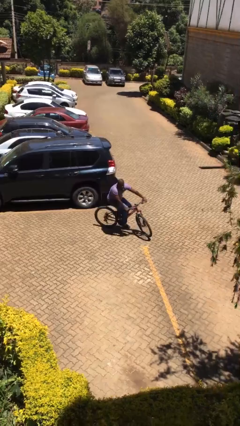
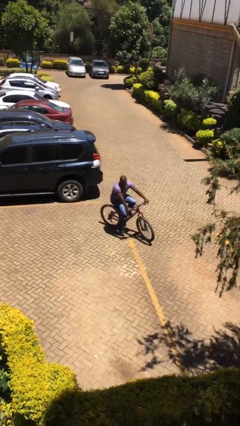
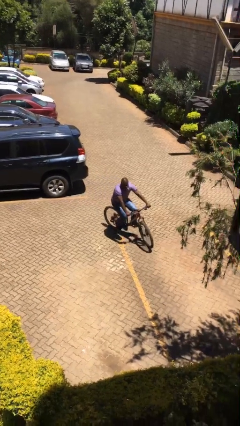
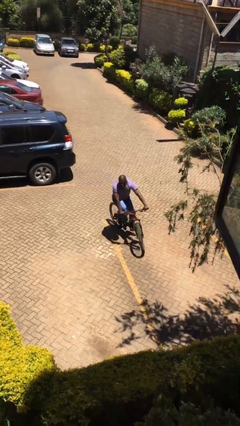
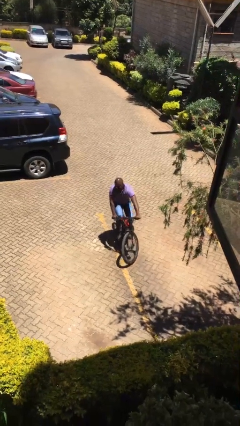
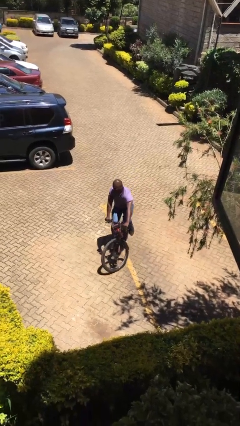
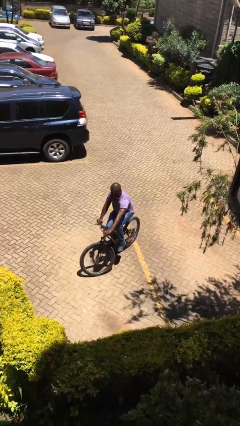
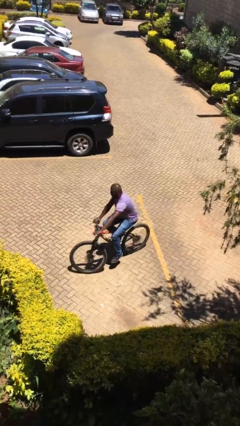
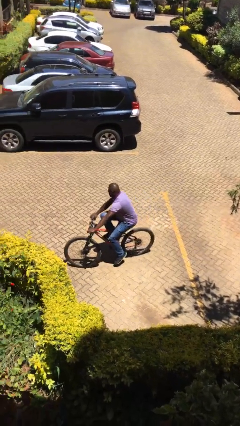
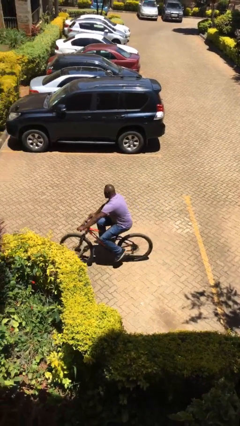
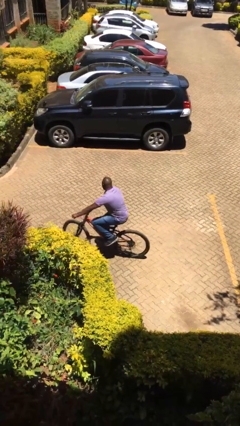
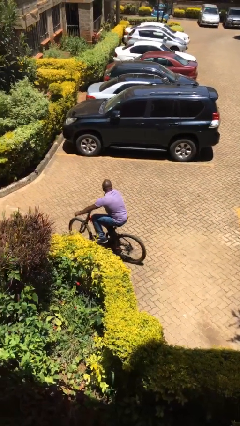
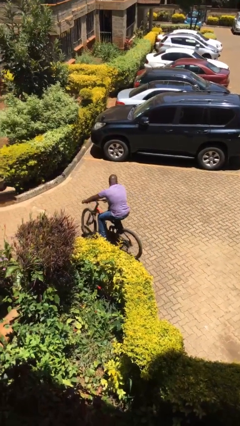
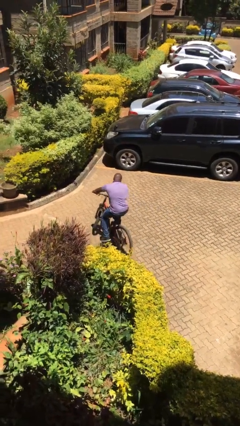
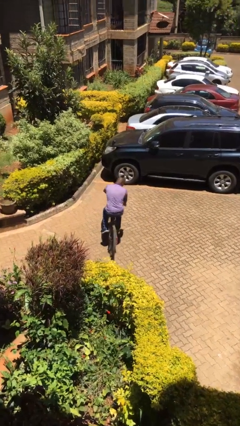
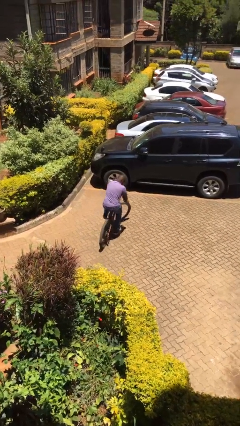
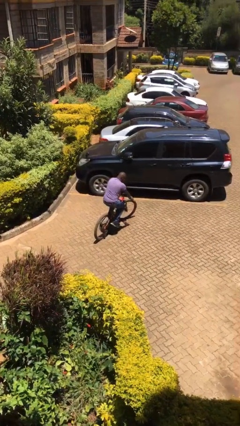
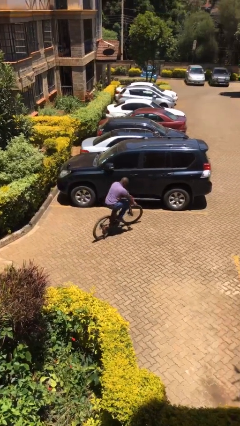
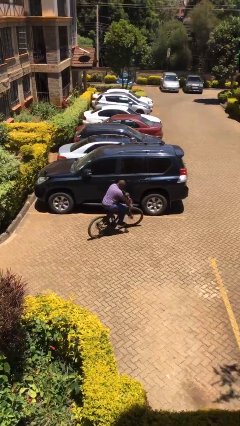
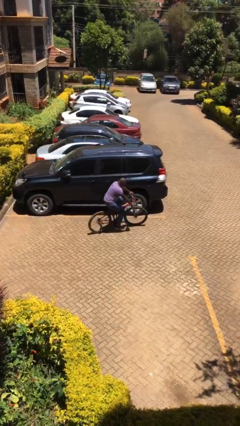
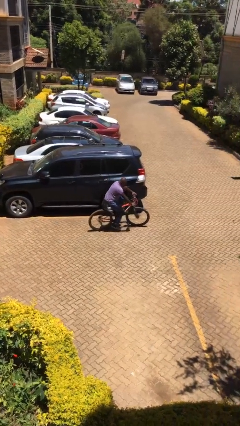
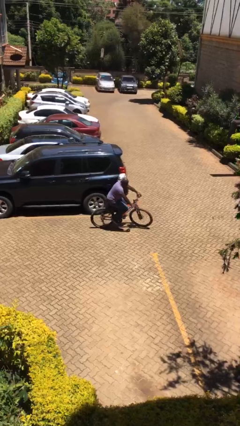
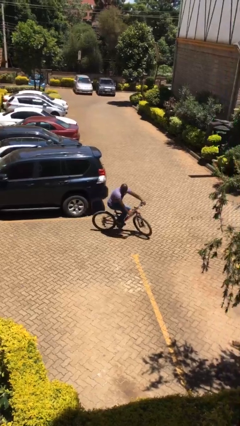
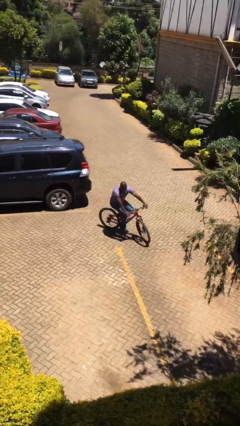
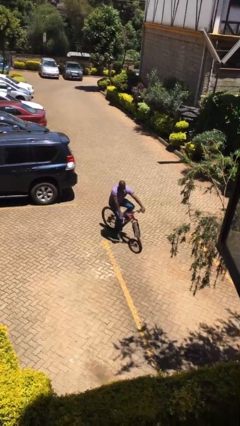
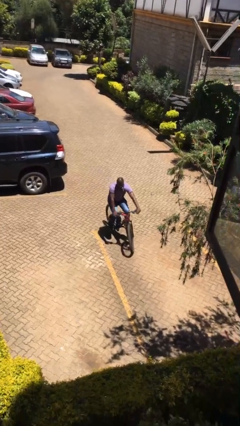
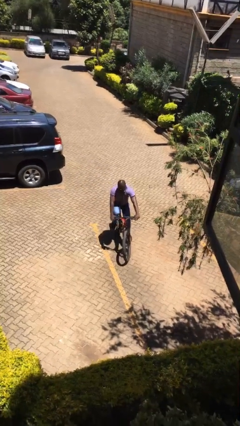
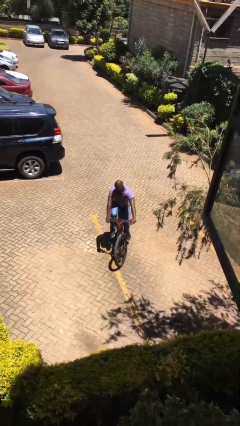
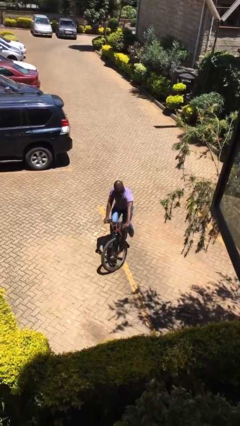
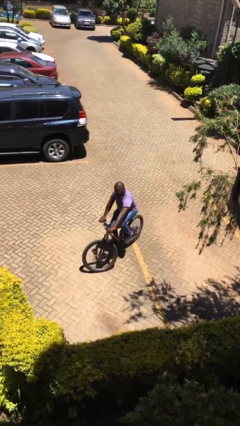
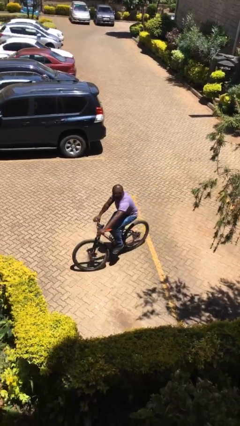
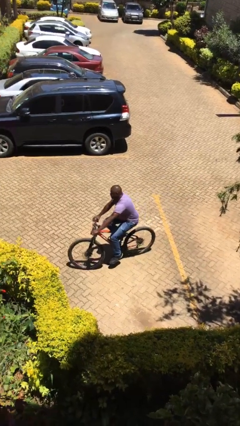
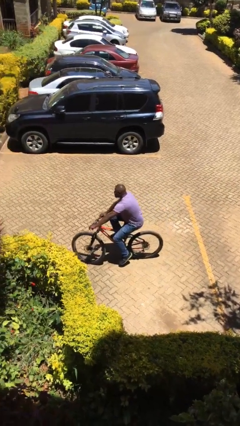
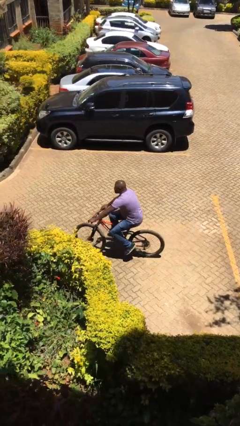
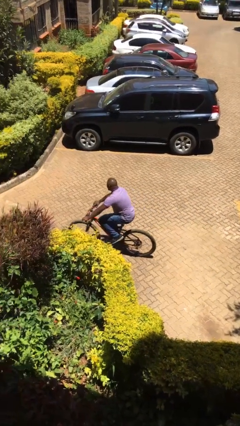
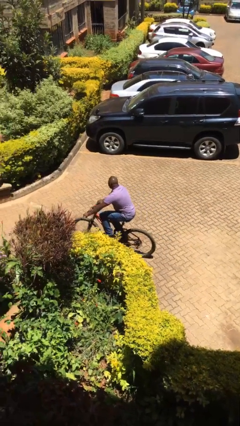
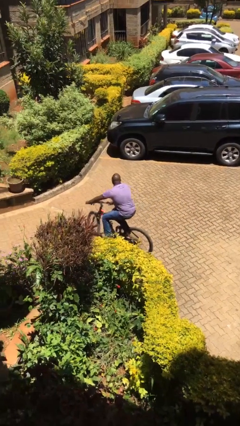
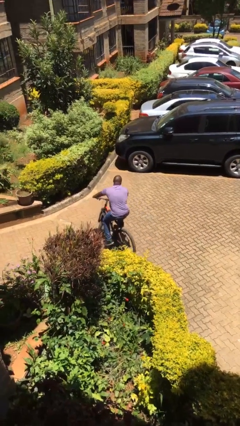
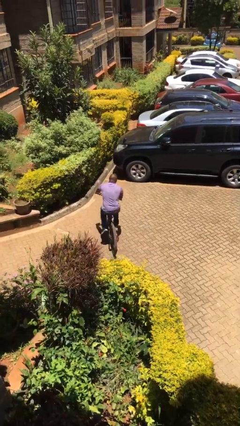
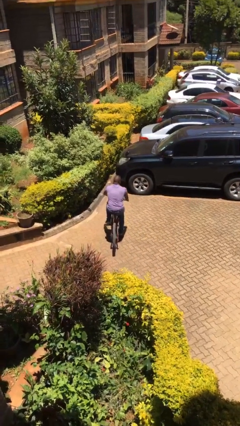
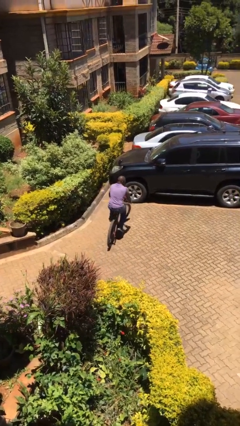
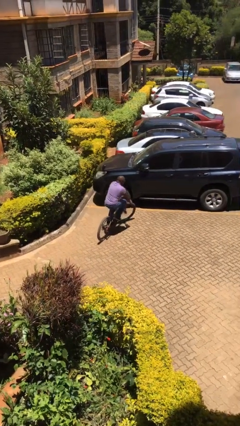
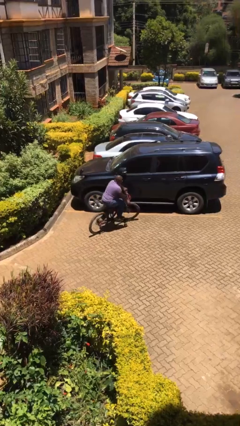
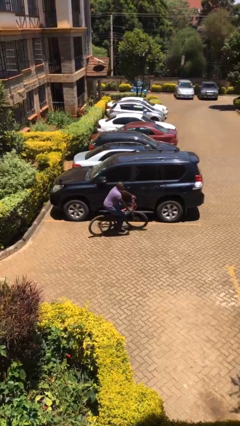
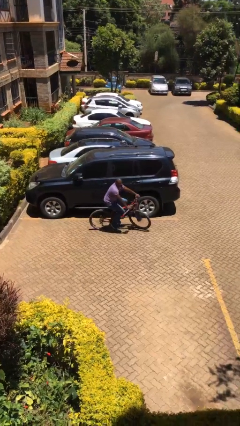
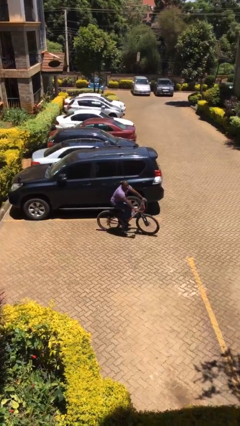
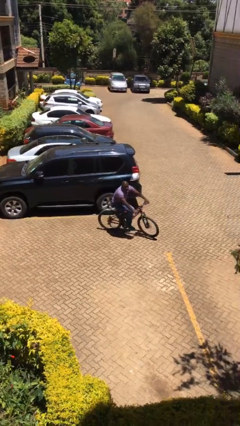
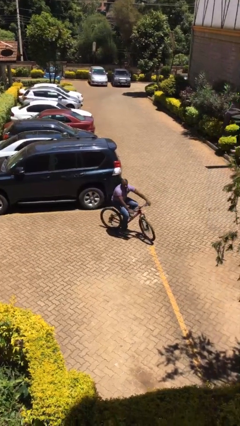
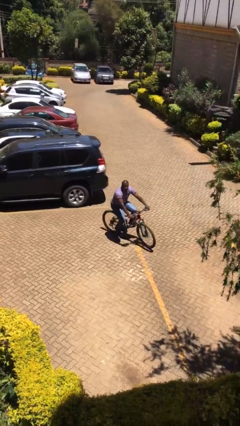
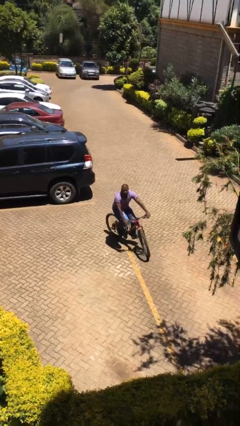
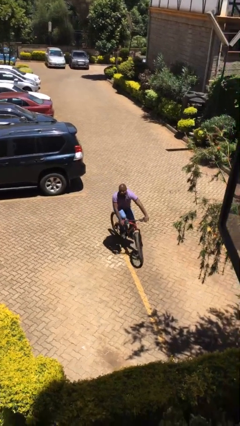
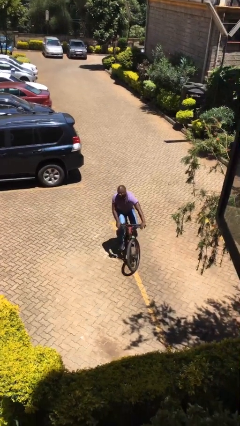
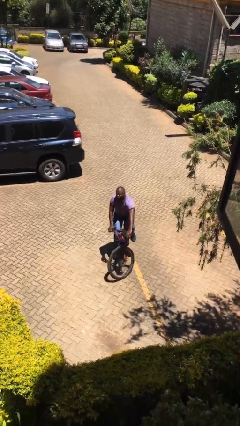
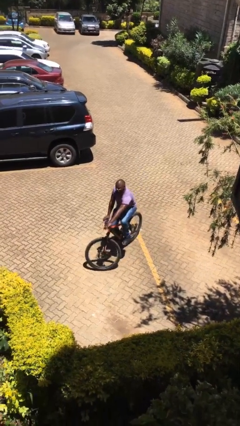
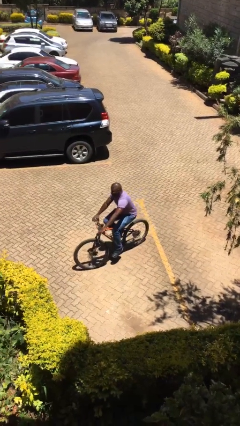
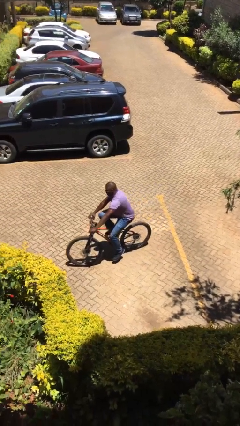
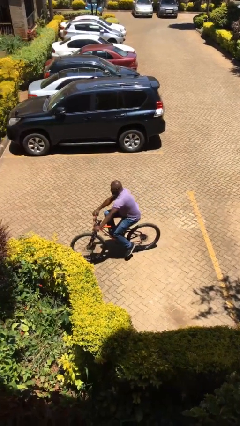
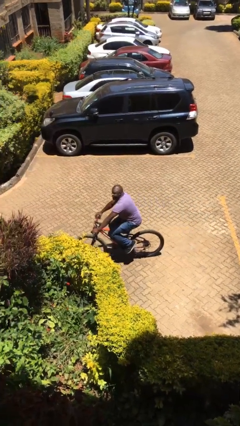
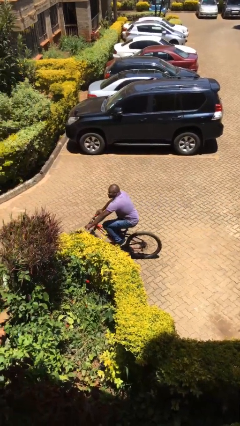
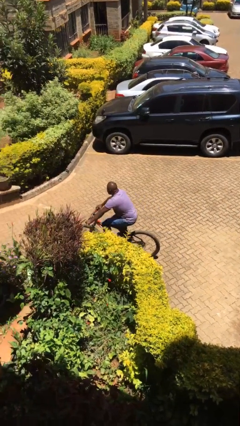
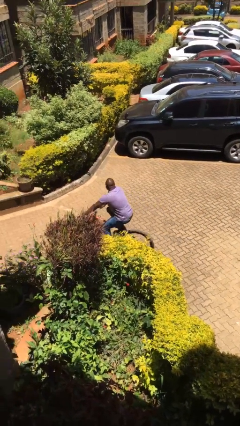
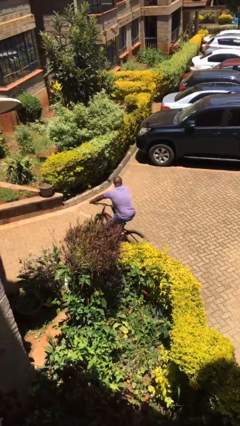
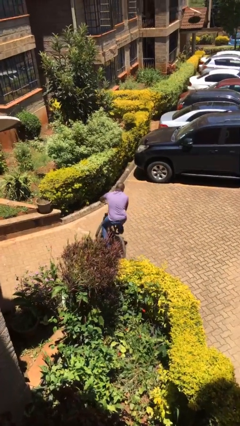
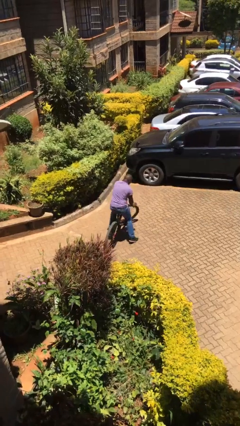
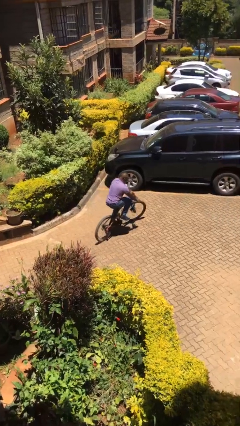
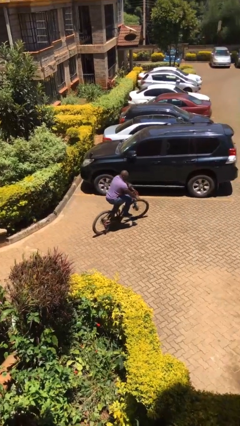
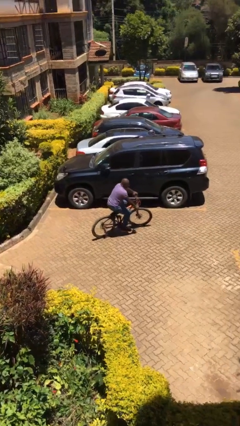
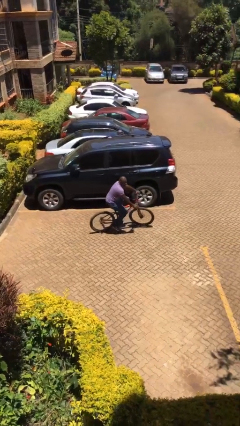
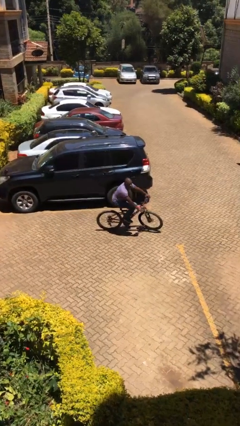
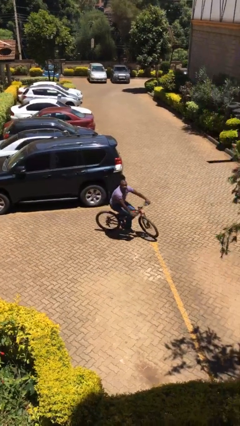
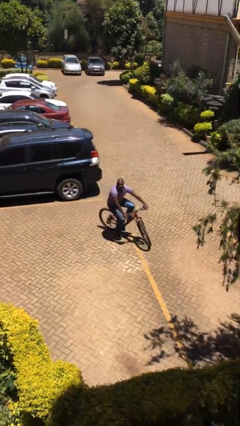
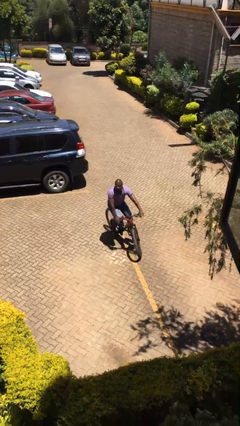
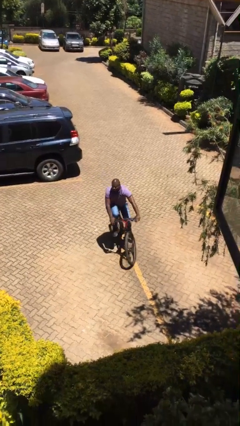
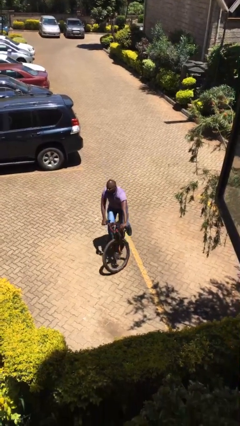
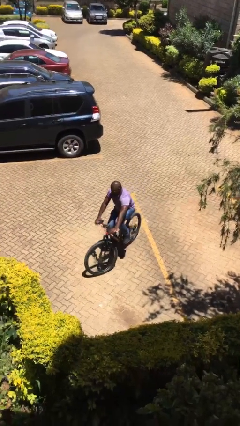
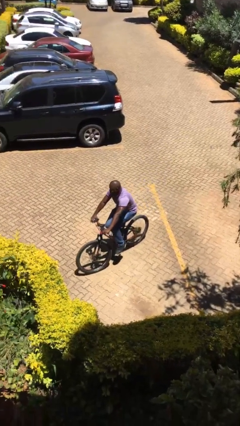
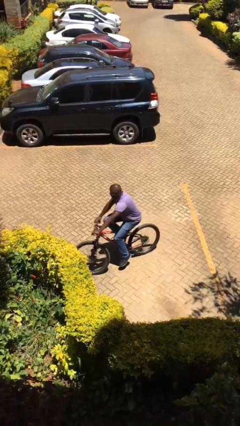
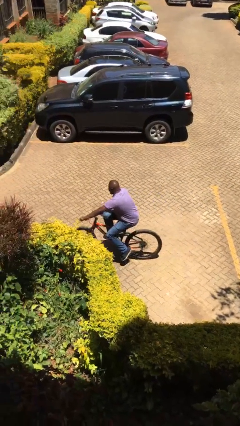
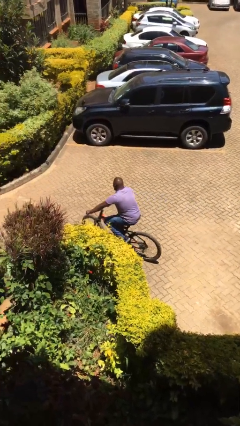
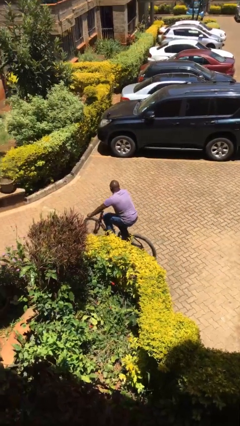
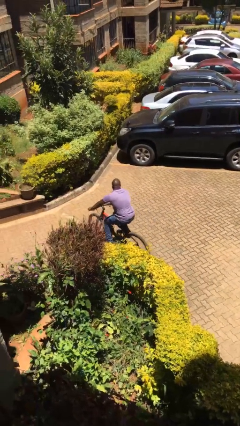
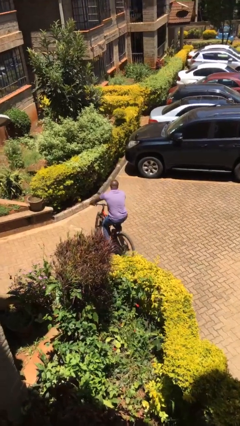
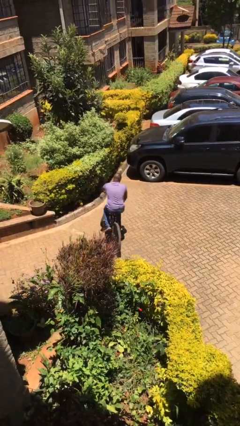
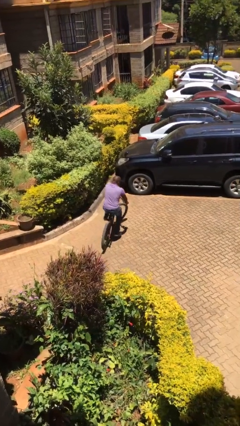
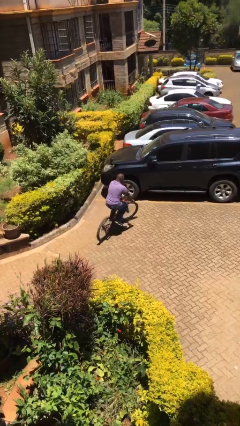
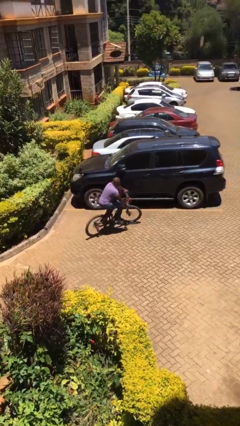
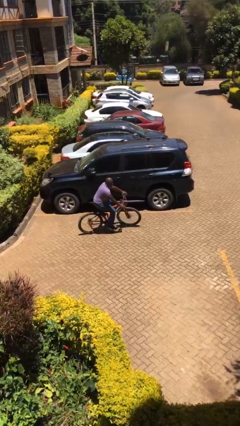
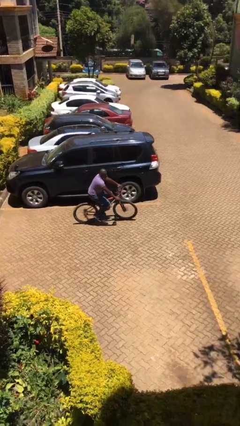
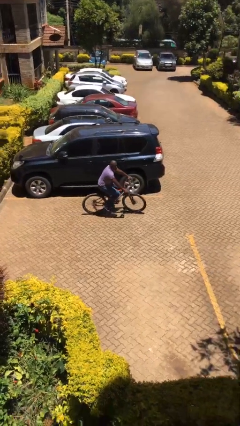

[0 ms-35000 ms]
person rides bicycle

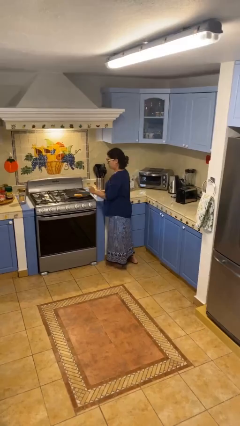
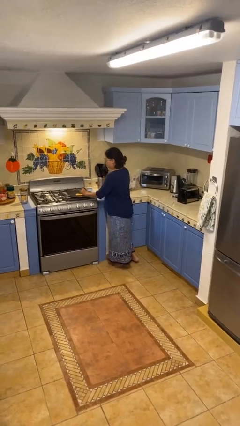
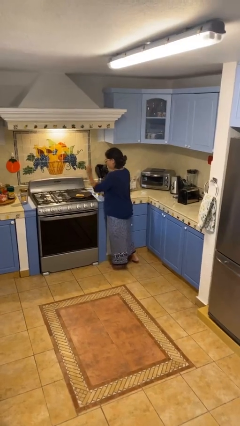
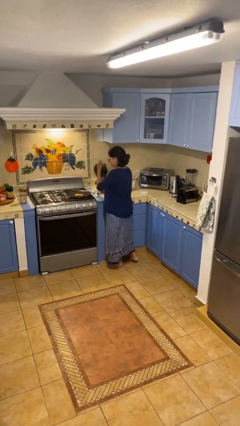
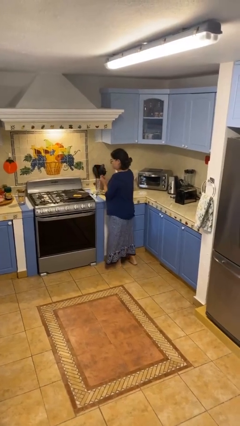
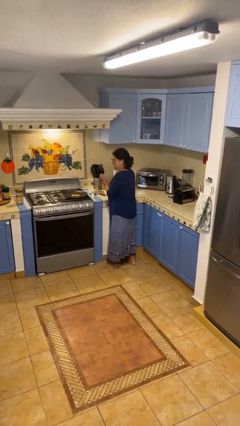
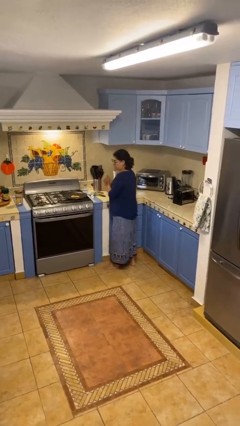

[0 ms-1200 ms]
person burns hand
